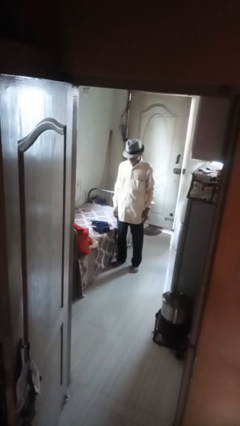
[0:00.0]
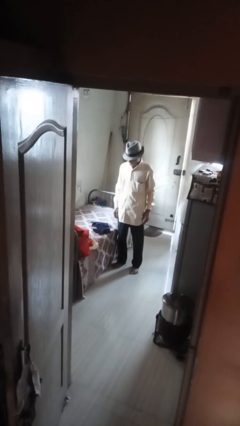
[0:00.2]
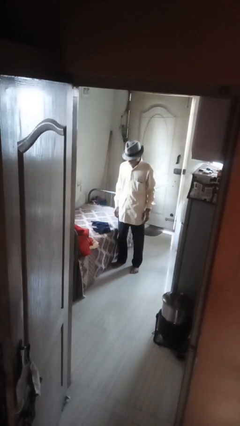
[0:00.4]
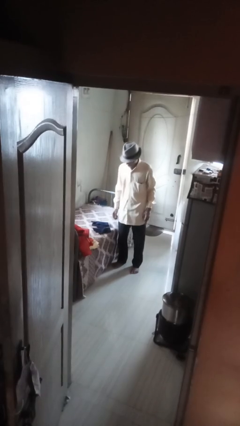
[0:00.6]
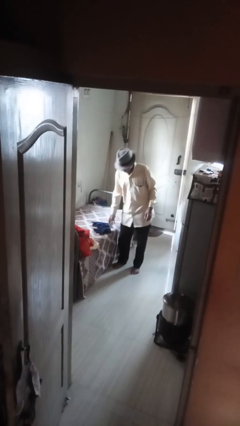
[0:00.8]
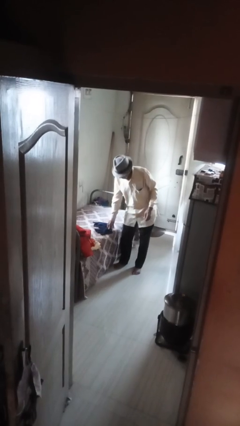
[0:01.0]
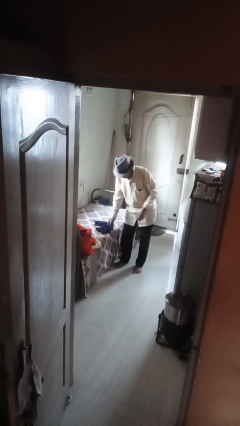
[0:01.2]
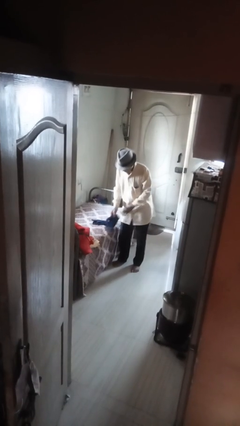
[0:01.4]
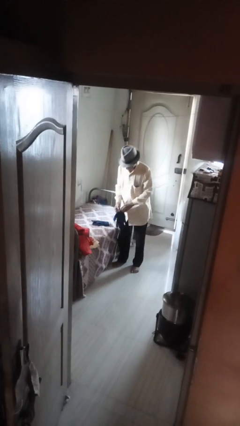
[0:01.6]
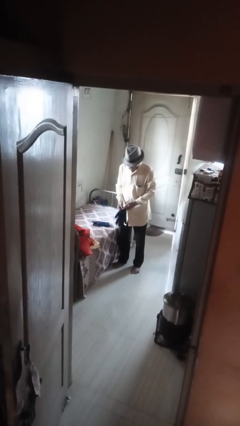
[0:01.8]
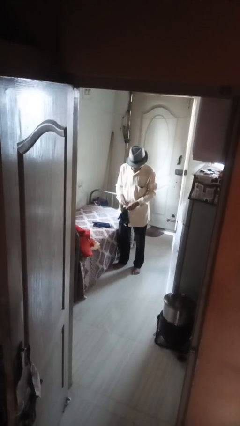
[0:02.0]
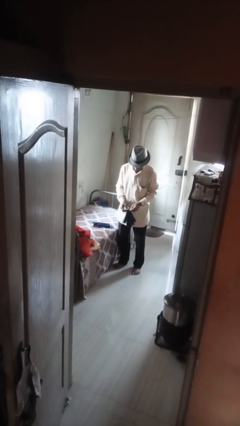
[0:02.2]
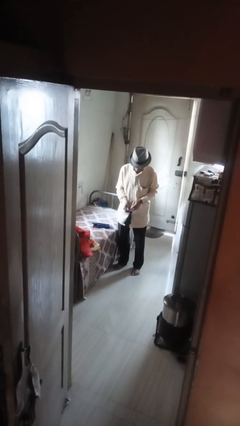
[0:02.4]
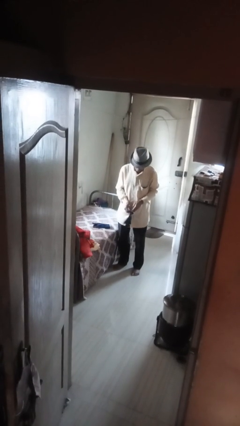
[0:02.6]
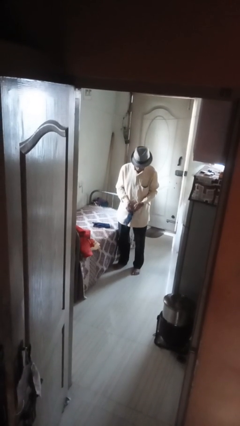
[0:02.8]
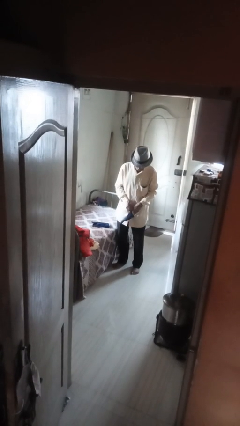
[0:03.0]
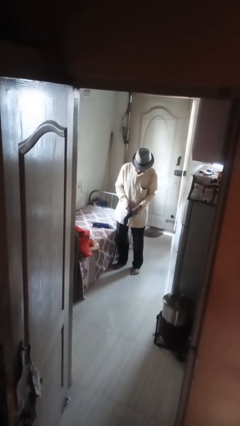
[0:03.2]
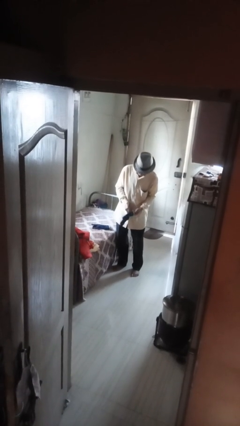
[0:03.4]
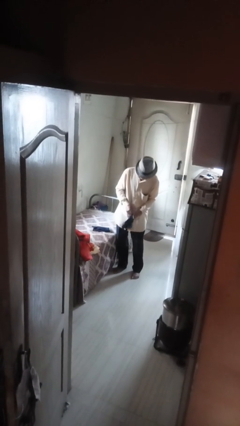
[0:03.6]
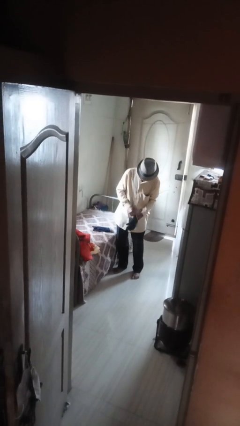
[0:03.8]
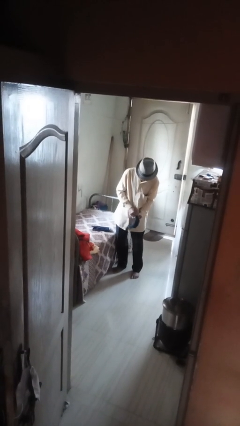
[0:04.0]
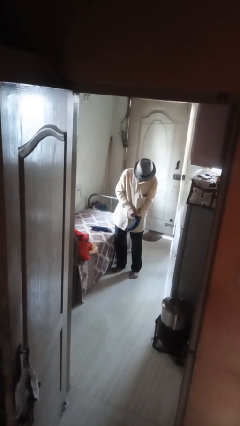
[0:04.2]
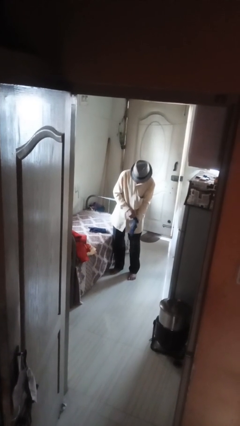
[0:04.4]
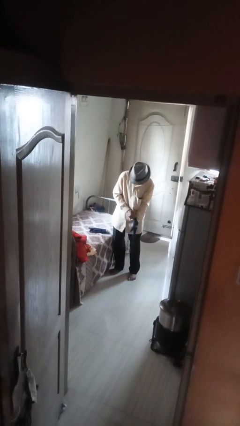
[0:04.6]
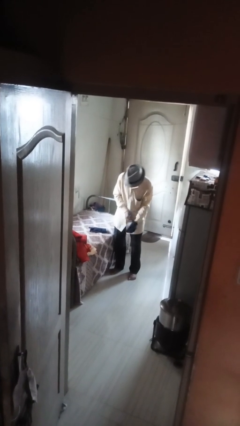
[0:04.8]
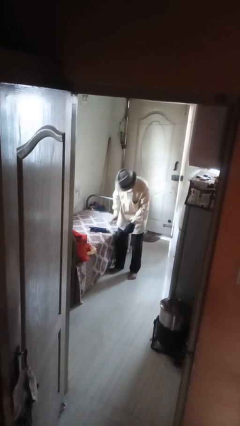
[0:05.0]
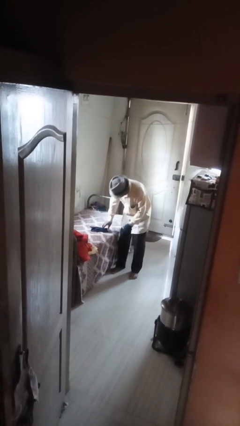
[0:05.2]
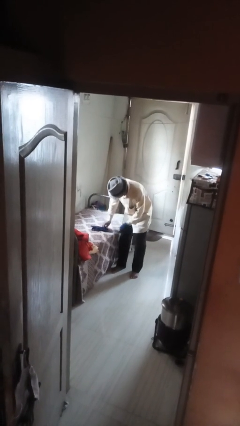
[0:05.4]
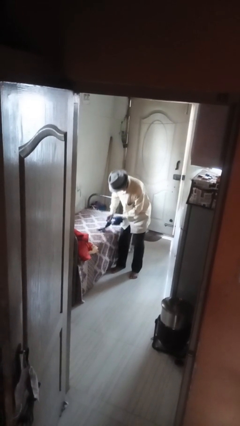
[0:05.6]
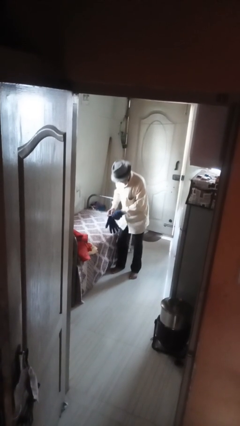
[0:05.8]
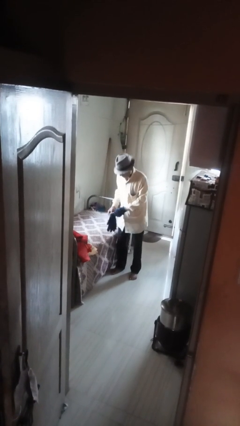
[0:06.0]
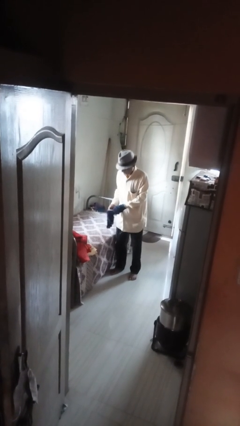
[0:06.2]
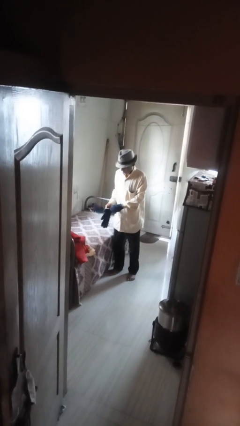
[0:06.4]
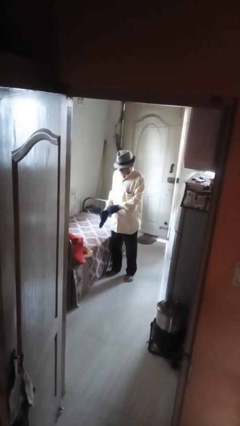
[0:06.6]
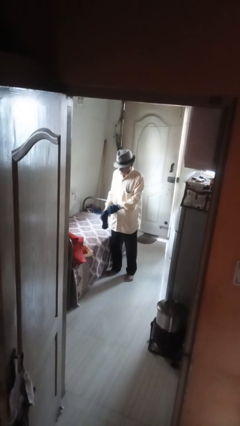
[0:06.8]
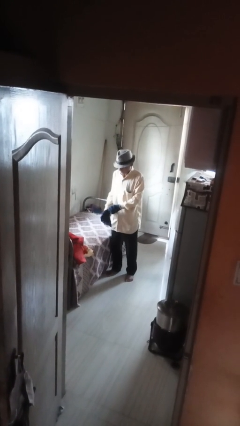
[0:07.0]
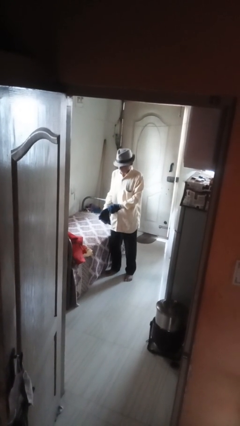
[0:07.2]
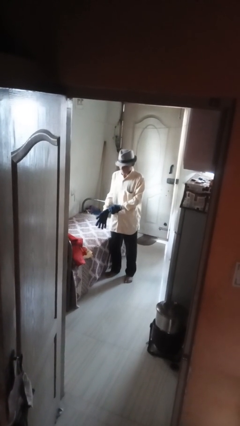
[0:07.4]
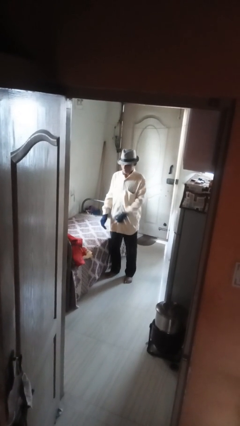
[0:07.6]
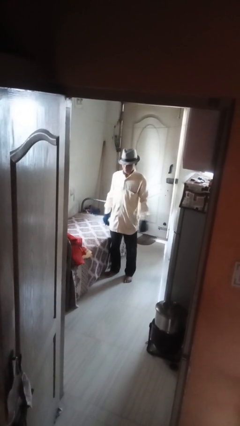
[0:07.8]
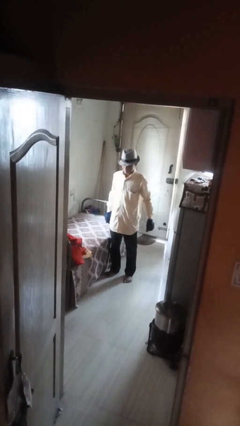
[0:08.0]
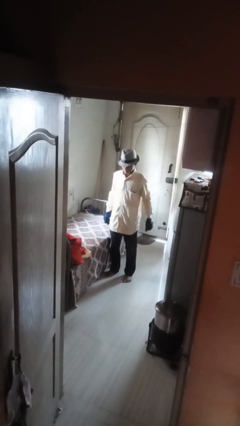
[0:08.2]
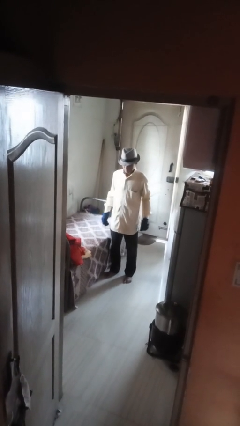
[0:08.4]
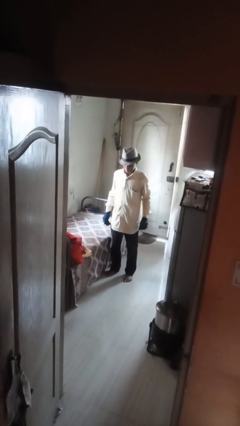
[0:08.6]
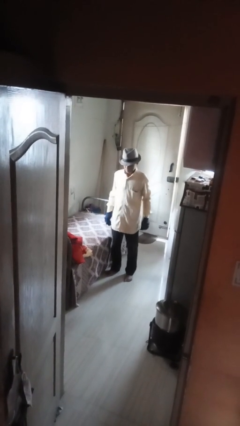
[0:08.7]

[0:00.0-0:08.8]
person puts on gloves

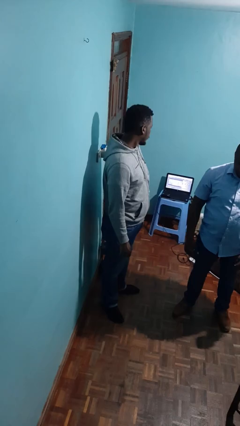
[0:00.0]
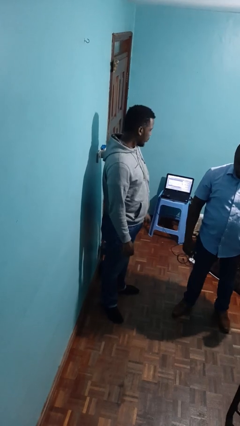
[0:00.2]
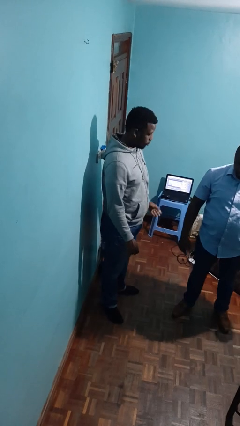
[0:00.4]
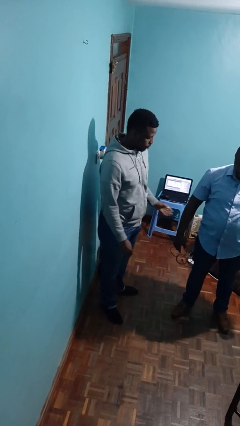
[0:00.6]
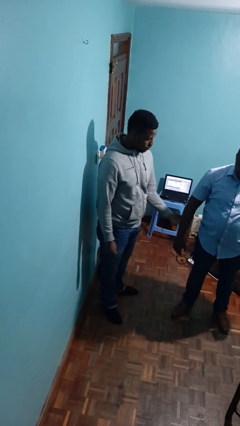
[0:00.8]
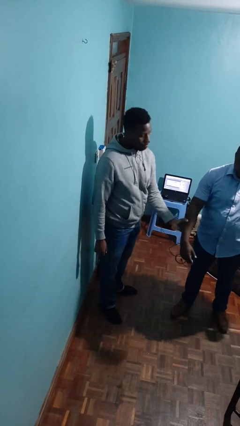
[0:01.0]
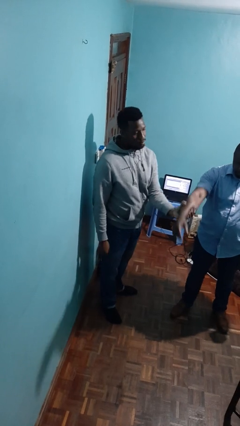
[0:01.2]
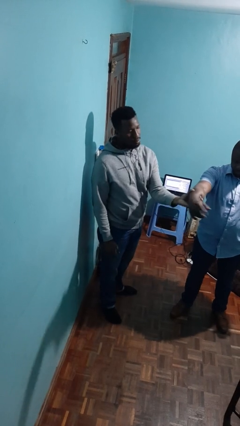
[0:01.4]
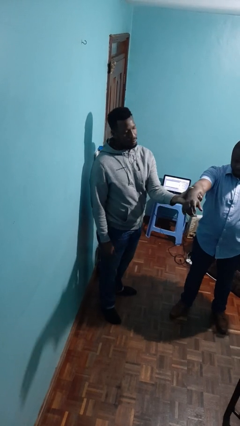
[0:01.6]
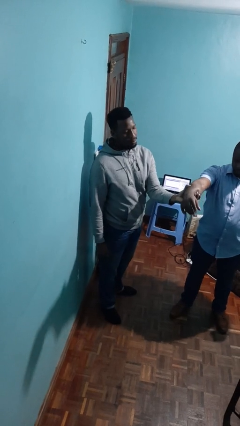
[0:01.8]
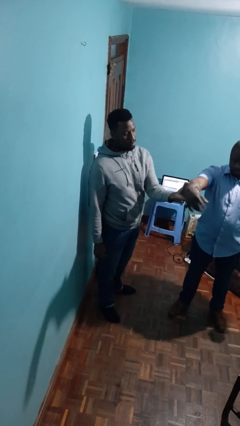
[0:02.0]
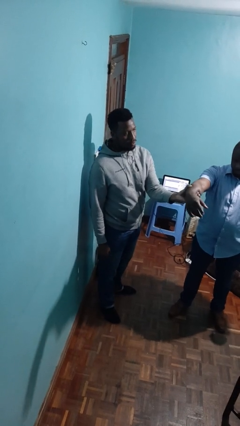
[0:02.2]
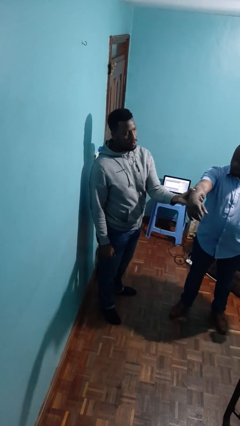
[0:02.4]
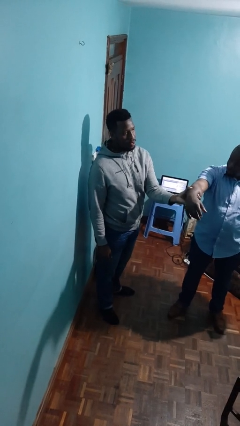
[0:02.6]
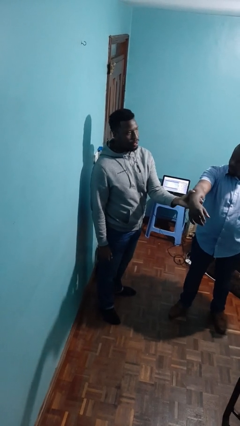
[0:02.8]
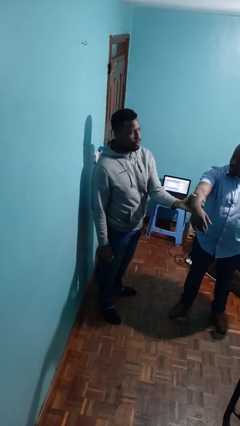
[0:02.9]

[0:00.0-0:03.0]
person grabs person by forearm

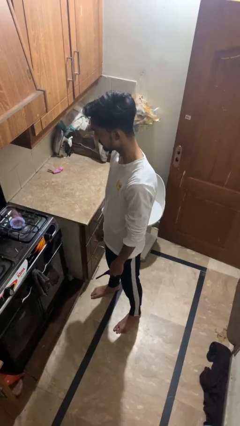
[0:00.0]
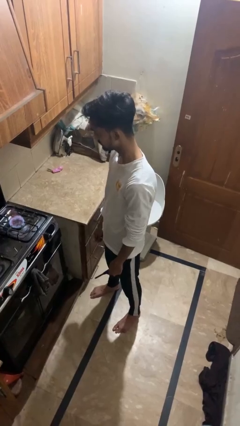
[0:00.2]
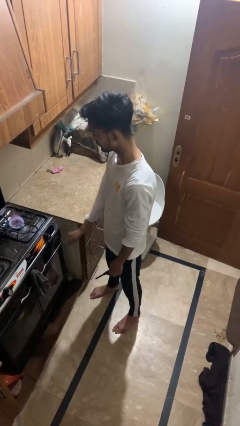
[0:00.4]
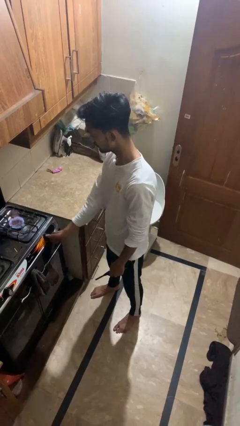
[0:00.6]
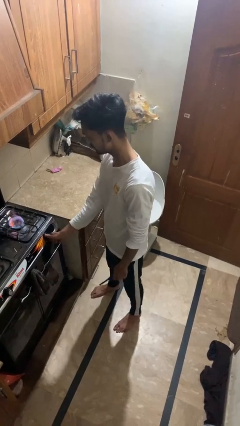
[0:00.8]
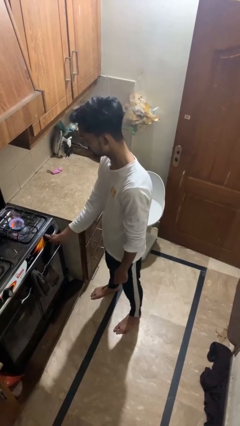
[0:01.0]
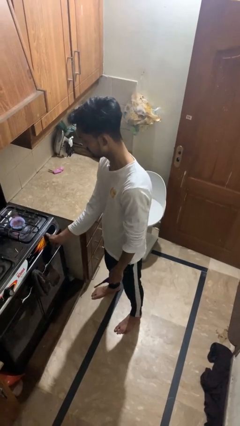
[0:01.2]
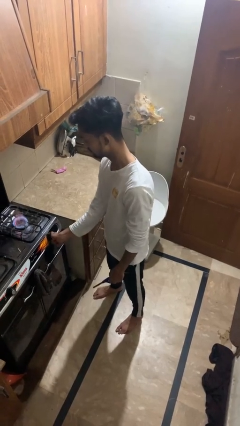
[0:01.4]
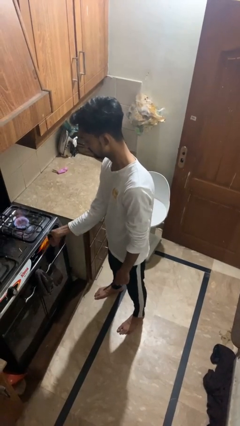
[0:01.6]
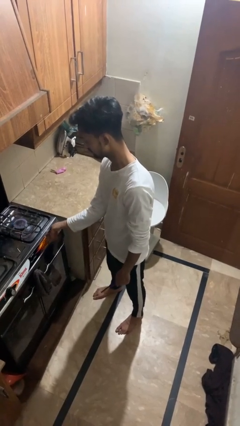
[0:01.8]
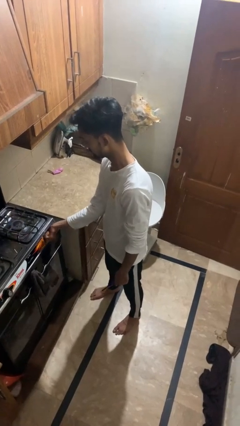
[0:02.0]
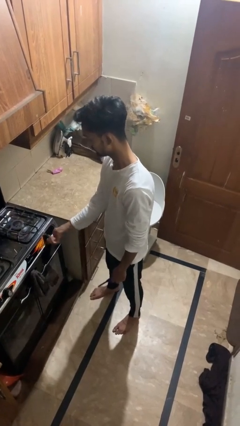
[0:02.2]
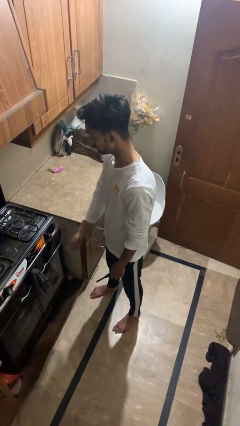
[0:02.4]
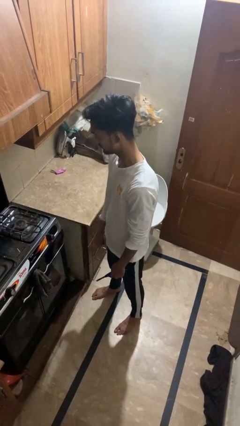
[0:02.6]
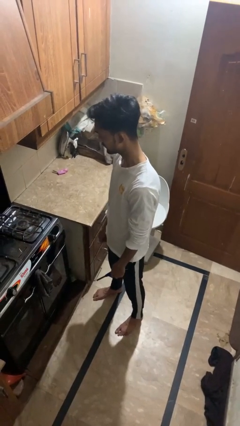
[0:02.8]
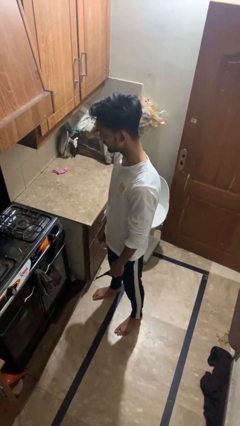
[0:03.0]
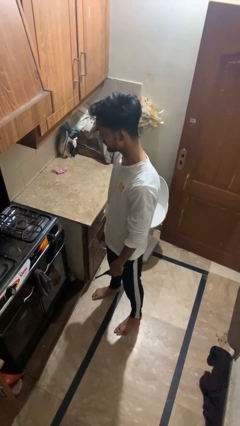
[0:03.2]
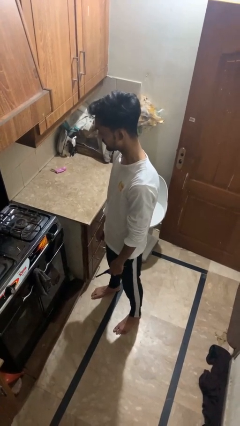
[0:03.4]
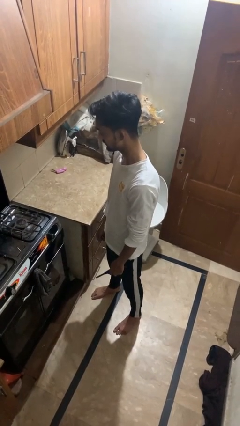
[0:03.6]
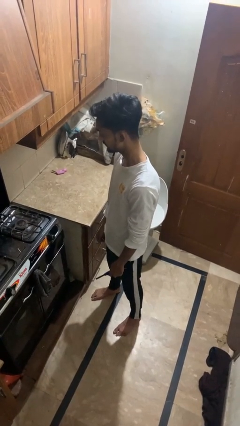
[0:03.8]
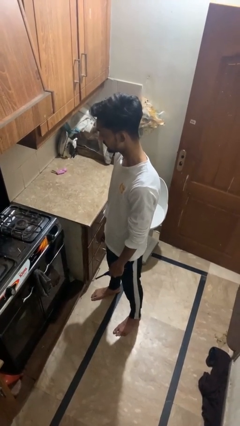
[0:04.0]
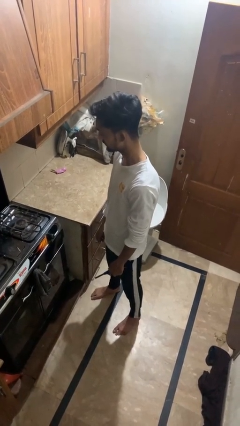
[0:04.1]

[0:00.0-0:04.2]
person turns off stovetop

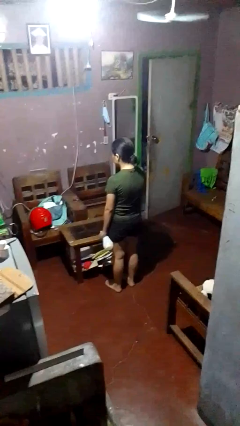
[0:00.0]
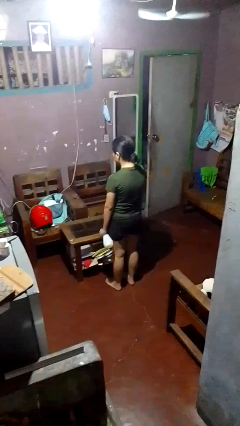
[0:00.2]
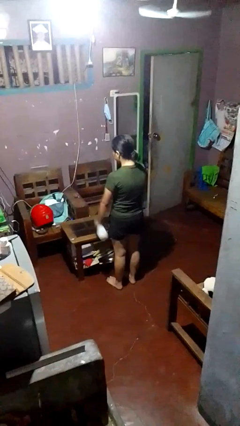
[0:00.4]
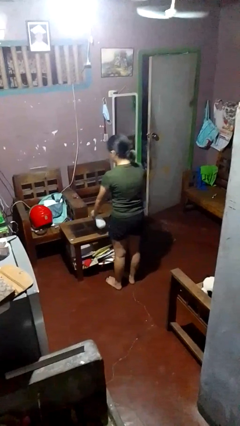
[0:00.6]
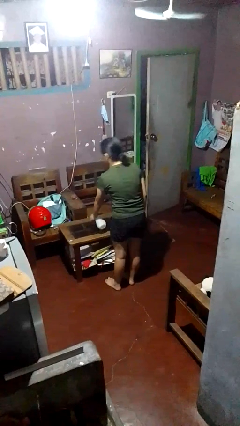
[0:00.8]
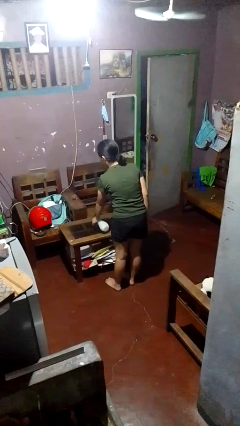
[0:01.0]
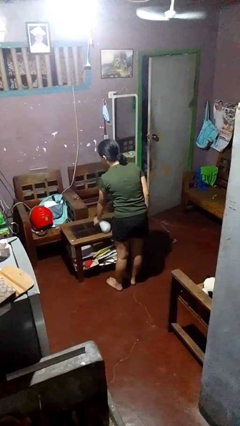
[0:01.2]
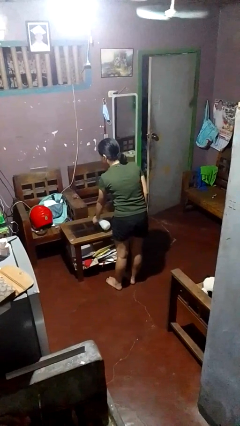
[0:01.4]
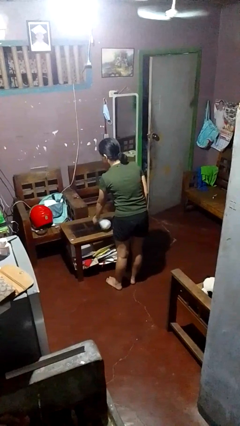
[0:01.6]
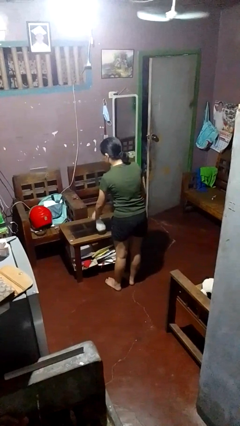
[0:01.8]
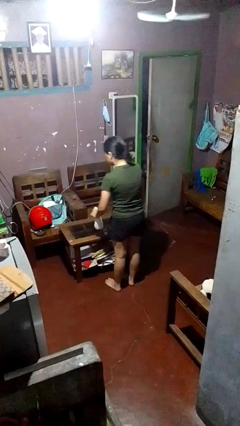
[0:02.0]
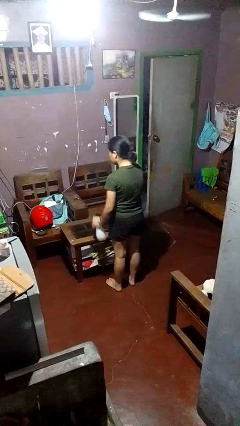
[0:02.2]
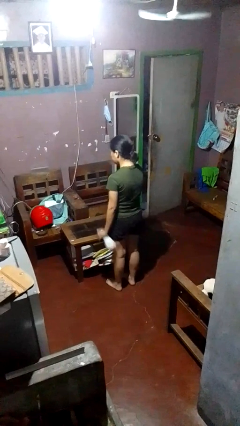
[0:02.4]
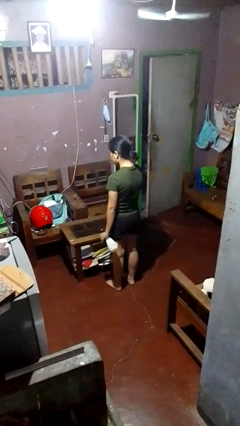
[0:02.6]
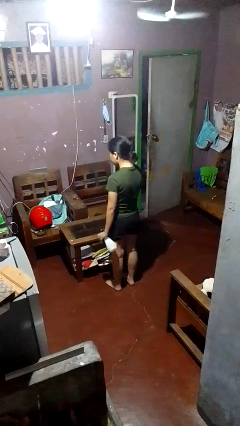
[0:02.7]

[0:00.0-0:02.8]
person sprays from bottle
